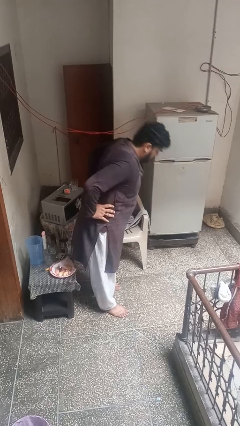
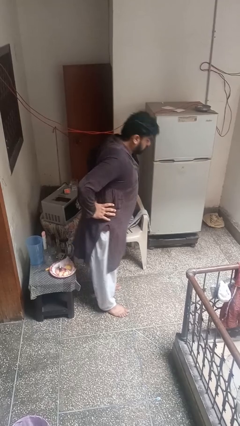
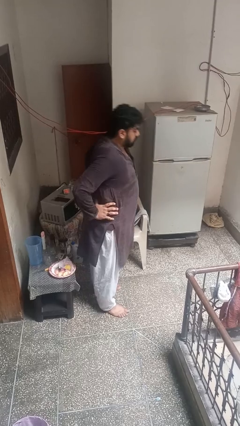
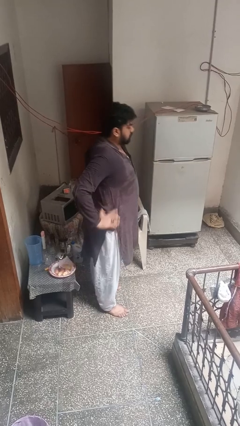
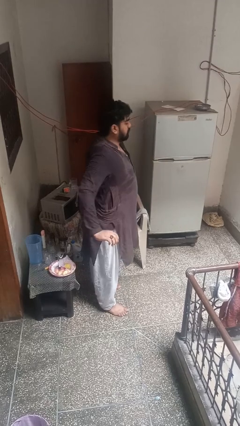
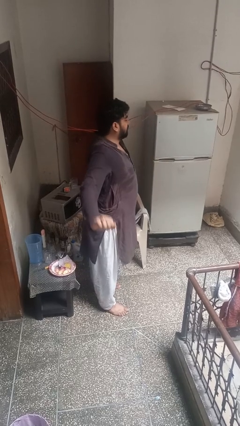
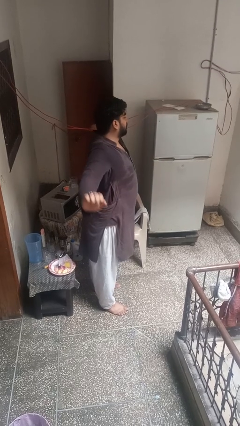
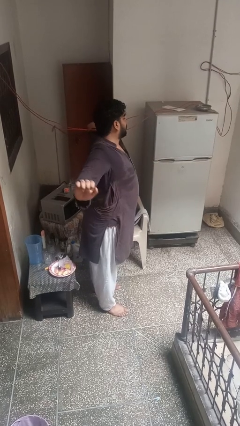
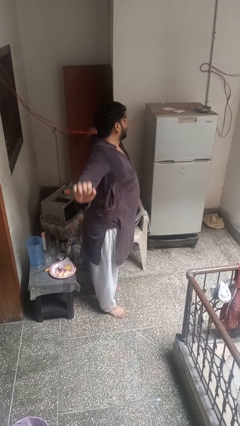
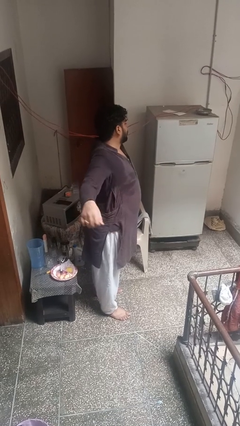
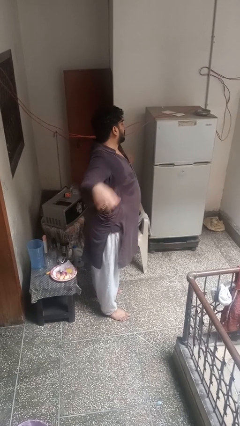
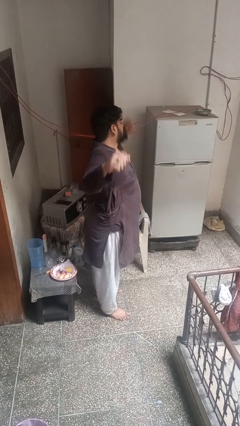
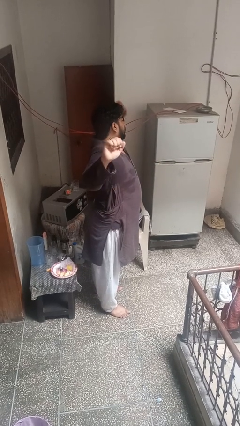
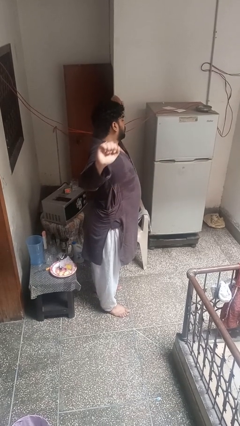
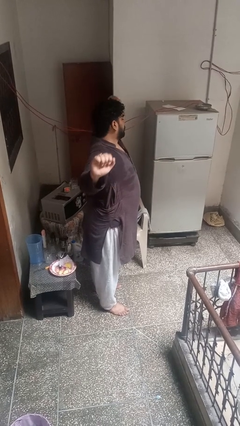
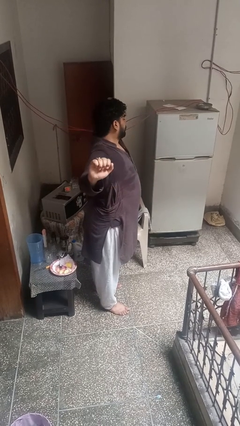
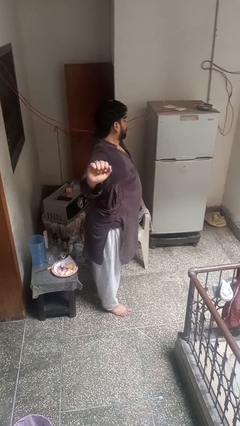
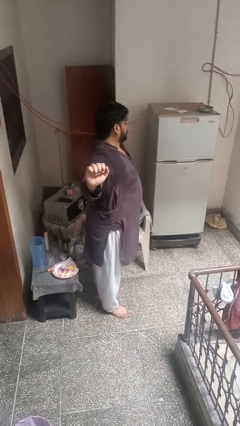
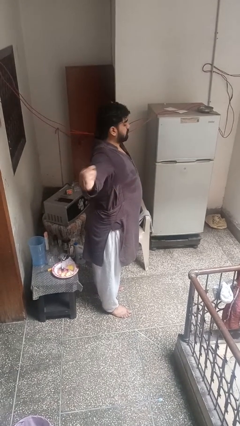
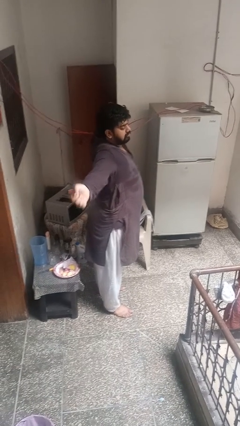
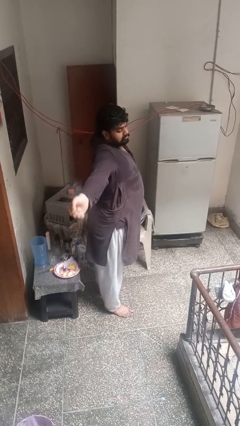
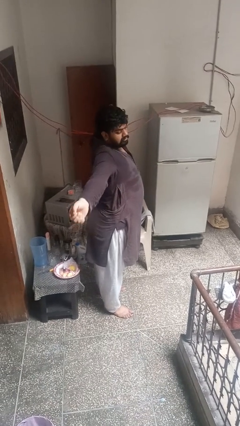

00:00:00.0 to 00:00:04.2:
person stretches arms to side

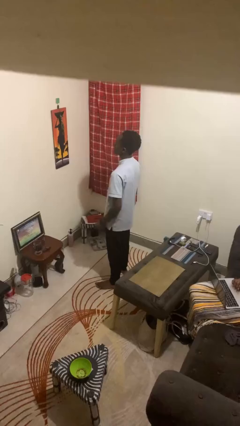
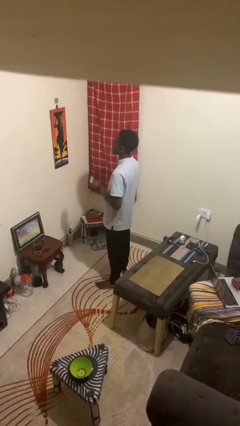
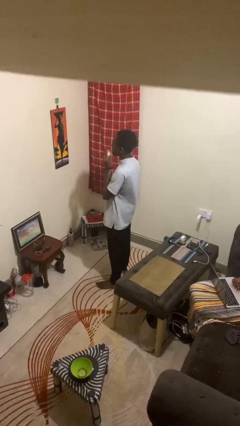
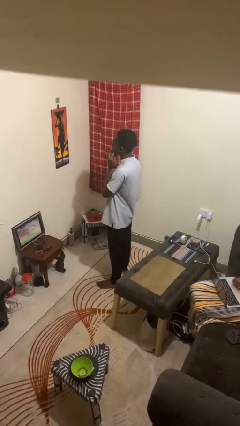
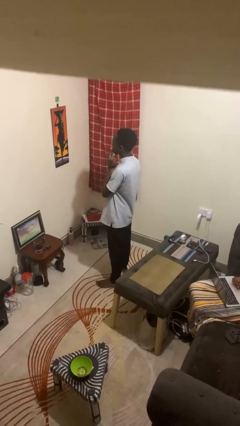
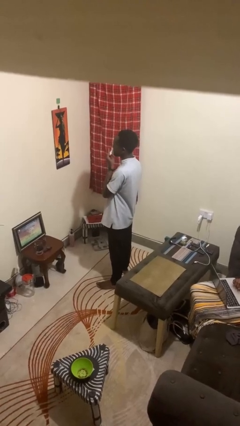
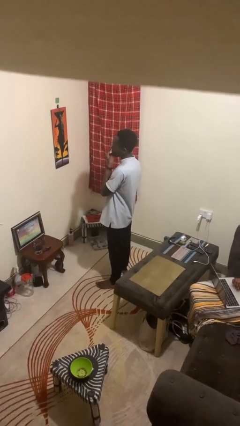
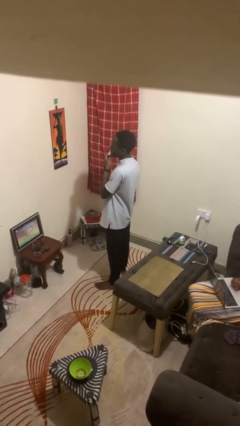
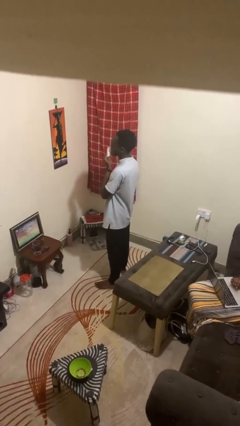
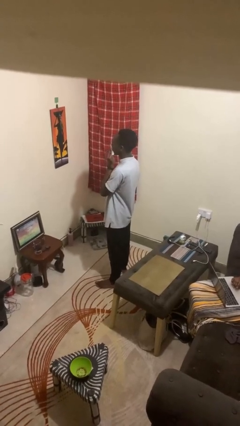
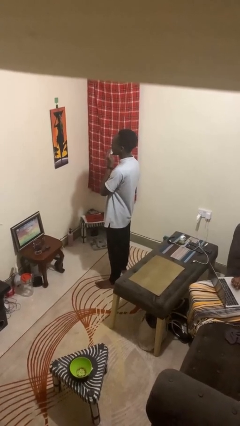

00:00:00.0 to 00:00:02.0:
person wipes mouth with napkin

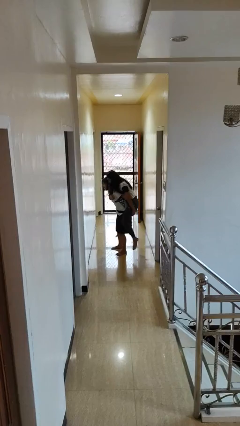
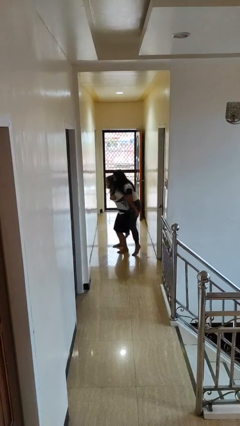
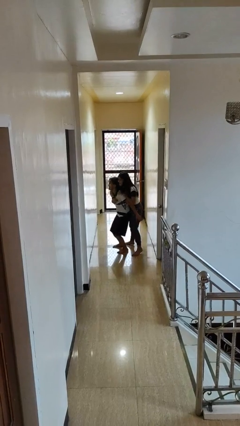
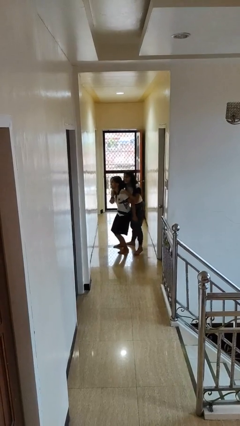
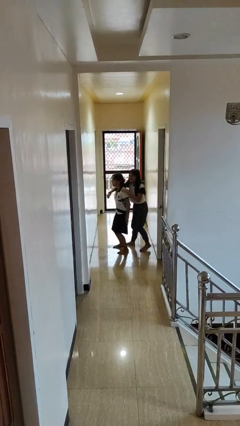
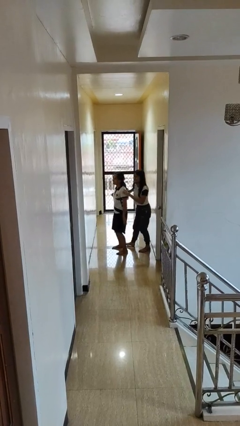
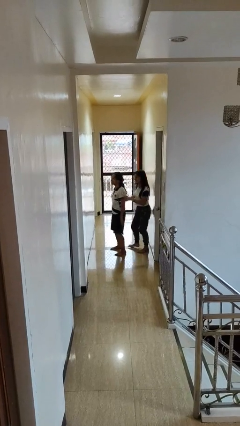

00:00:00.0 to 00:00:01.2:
person puts down person

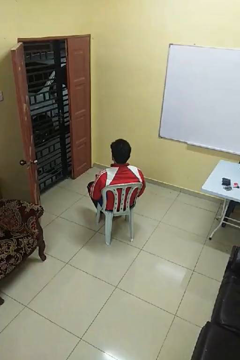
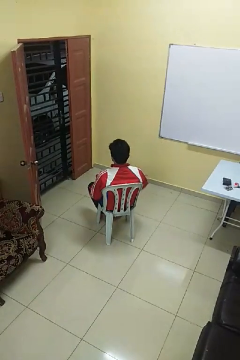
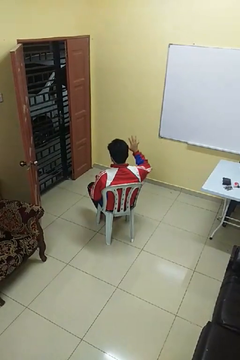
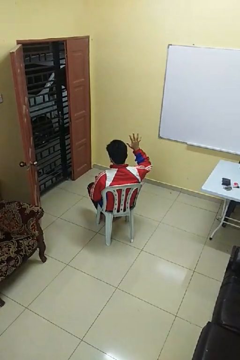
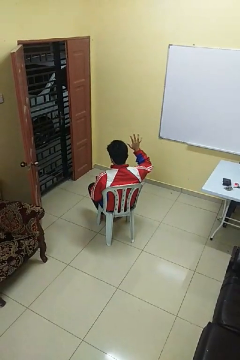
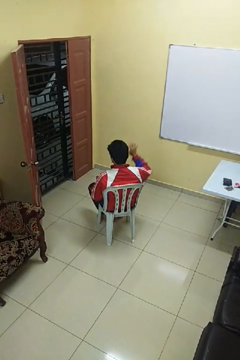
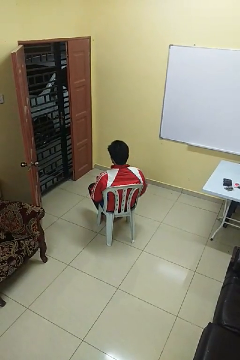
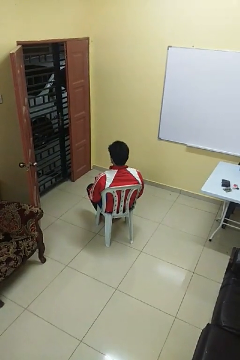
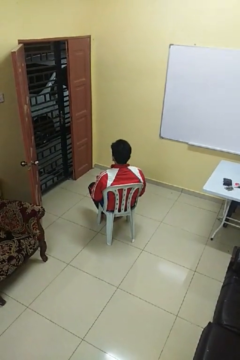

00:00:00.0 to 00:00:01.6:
person gestures number five

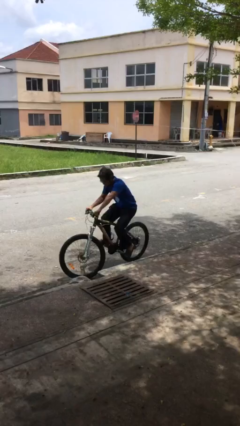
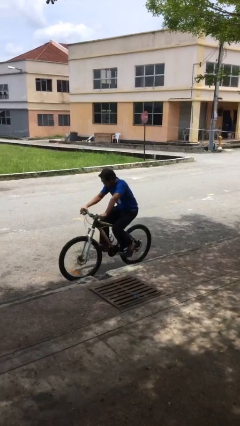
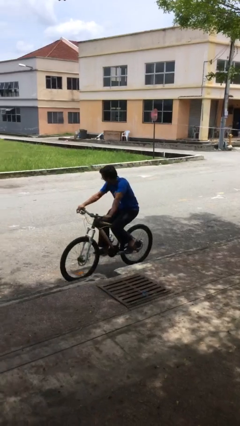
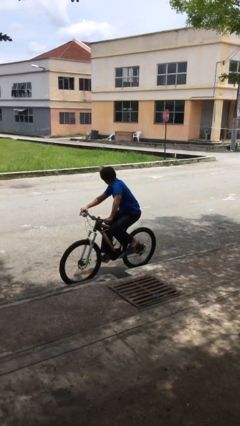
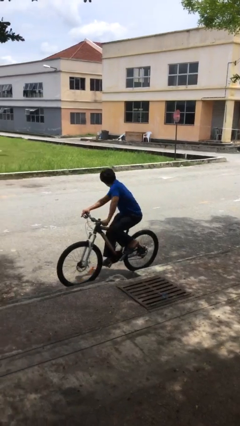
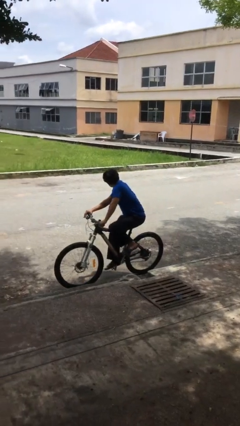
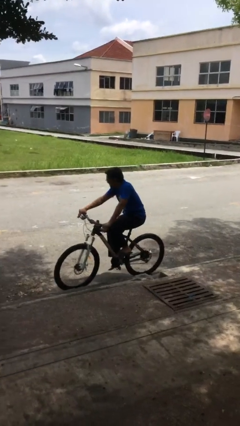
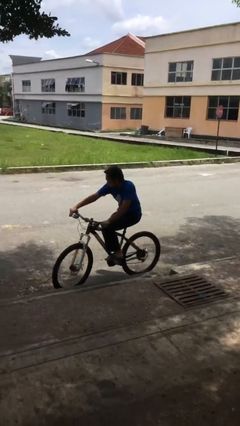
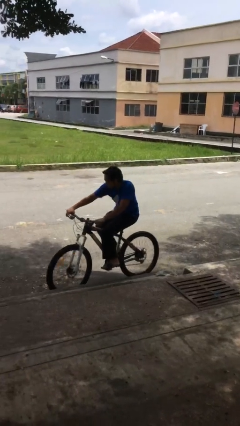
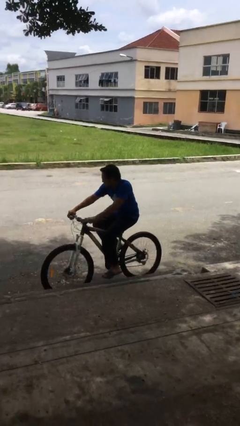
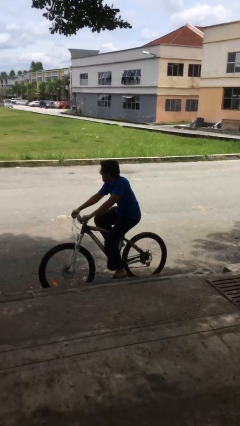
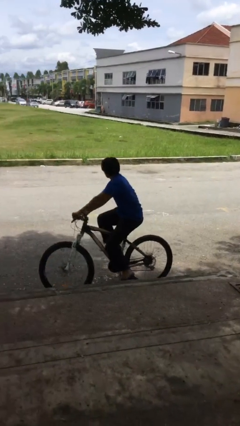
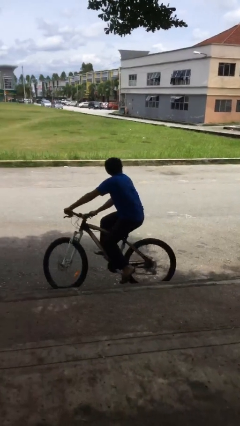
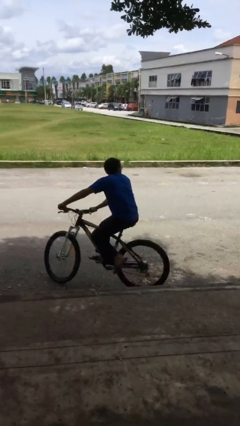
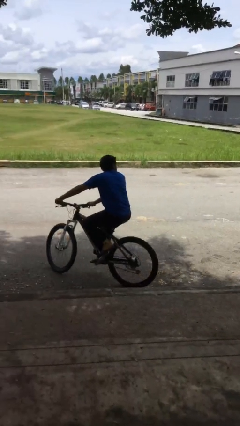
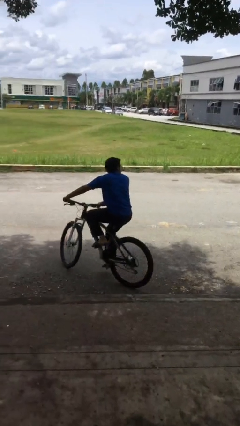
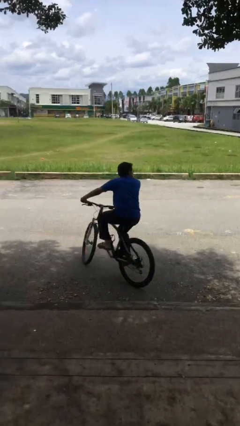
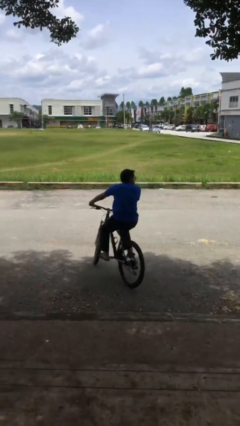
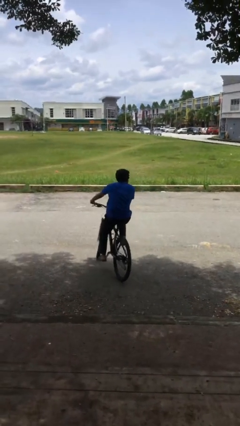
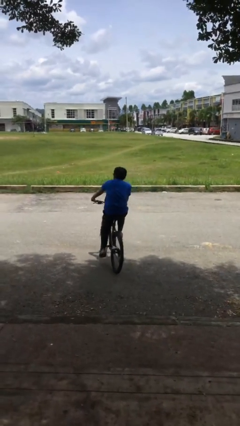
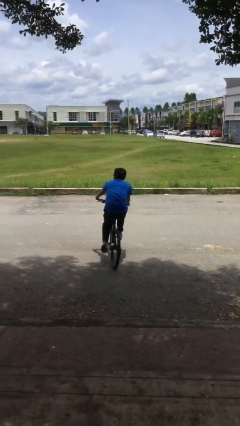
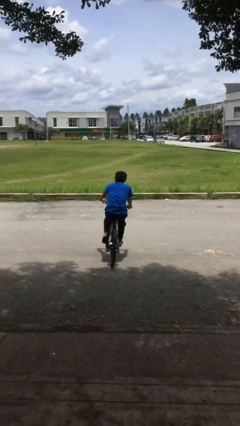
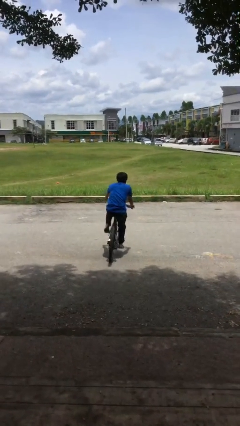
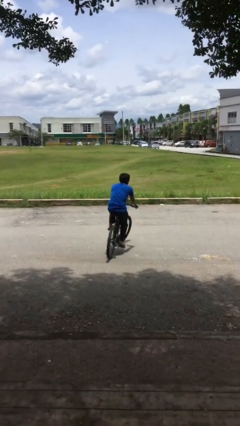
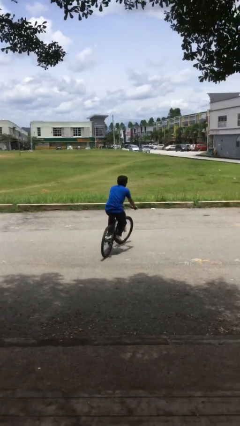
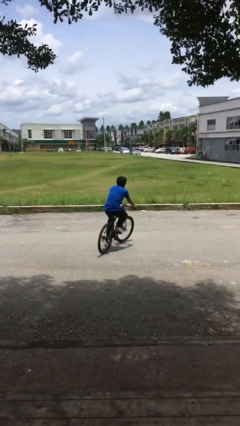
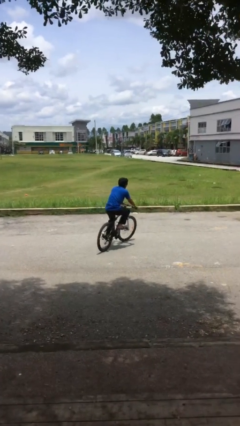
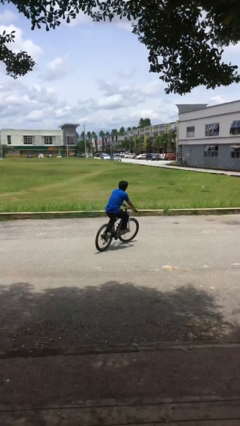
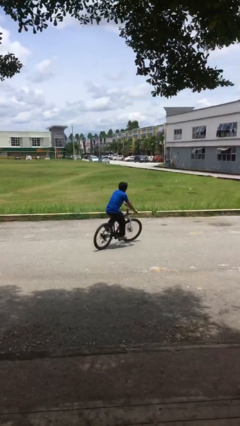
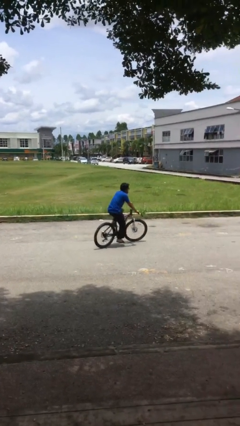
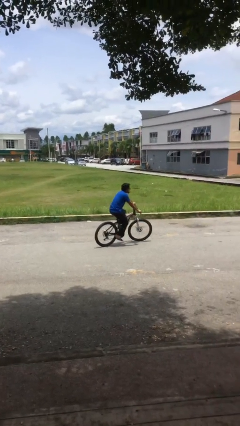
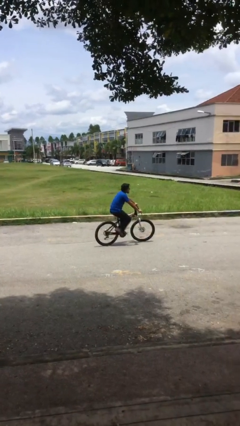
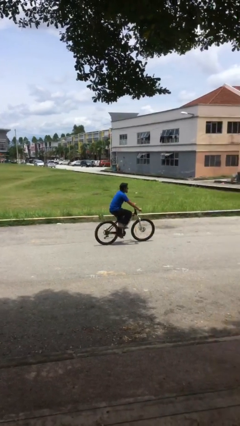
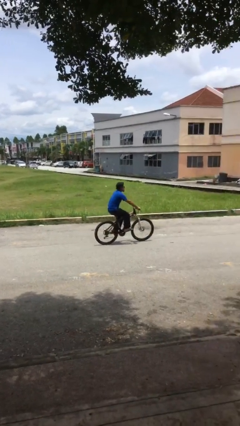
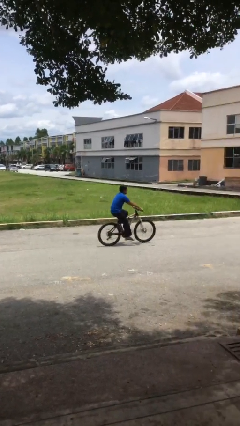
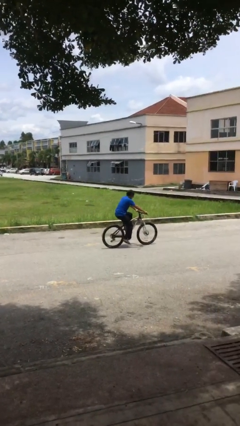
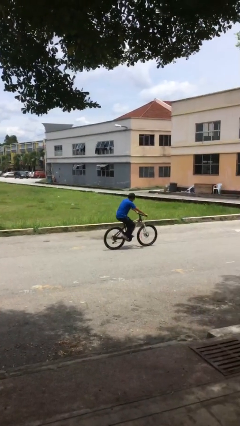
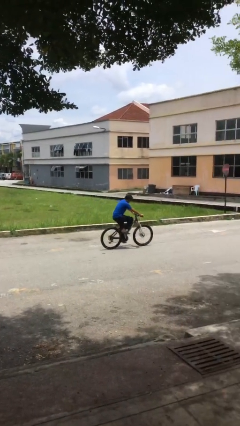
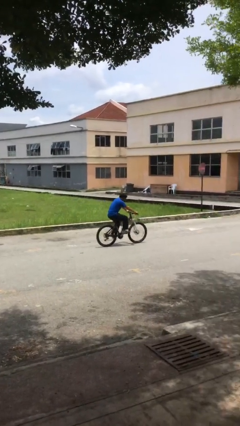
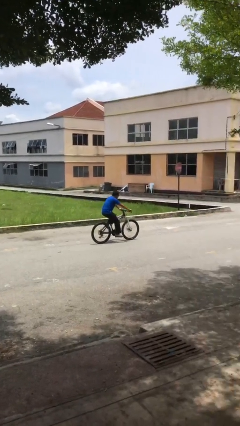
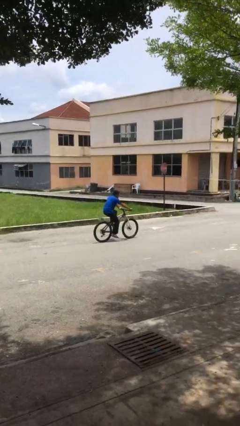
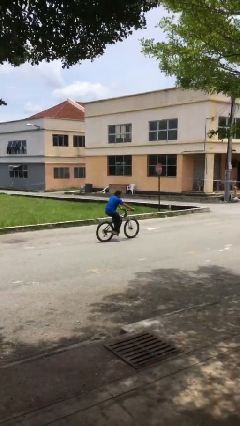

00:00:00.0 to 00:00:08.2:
person rides bicycle

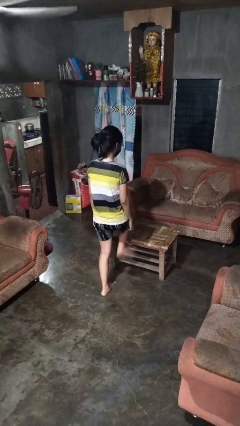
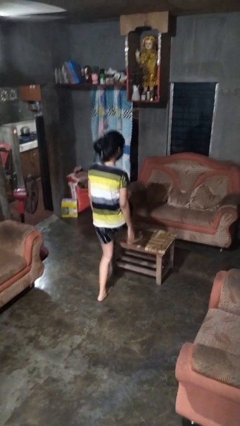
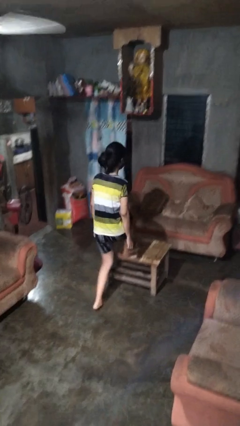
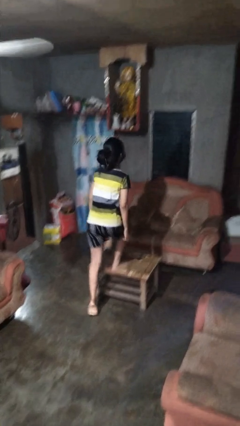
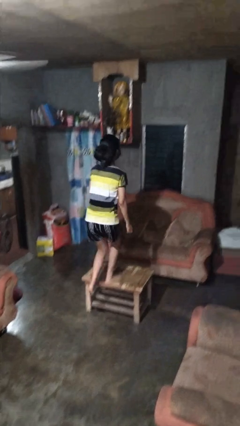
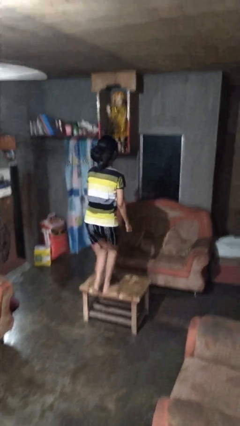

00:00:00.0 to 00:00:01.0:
person climbs on table
